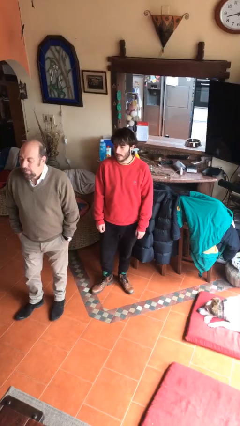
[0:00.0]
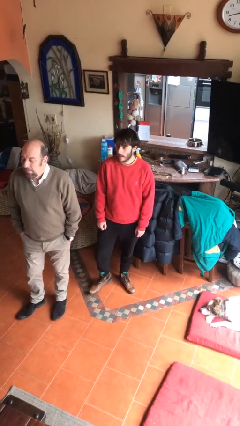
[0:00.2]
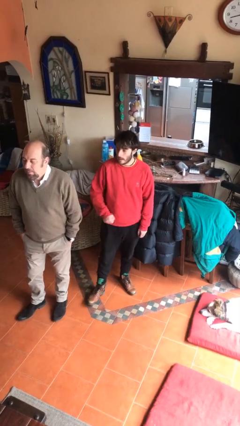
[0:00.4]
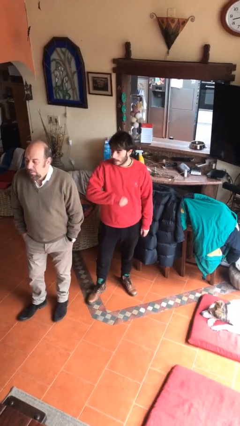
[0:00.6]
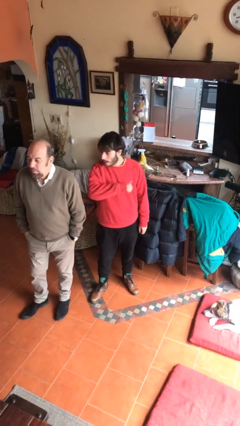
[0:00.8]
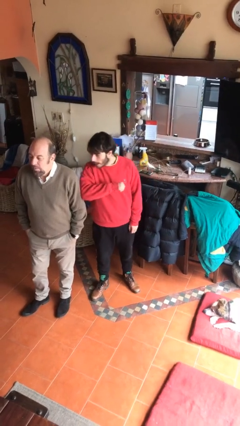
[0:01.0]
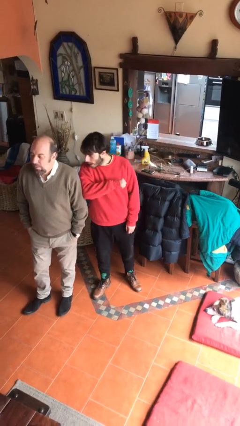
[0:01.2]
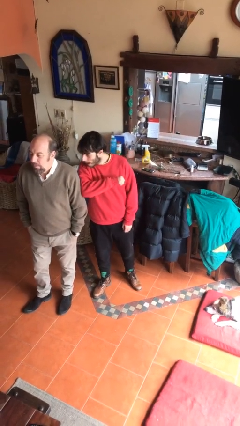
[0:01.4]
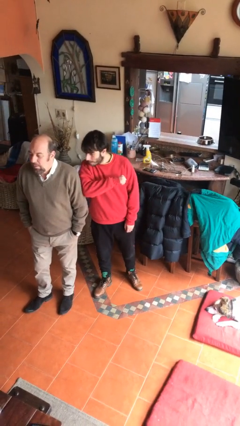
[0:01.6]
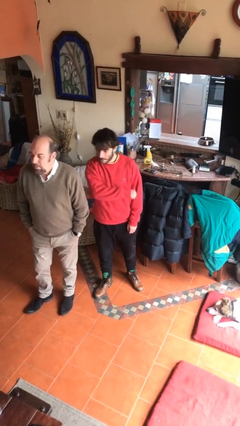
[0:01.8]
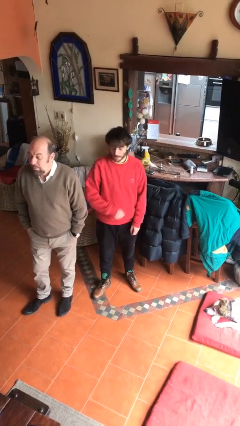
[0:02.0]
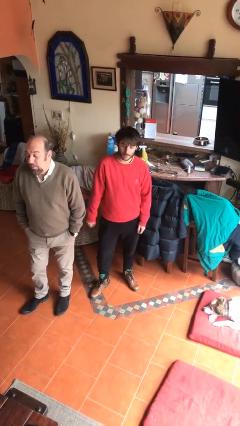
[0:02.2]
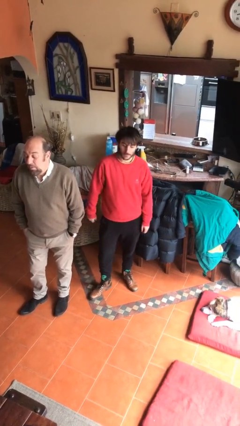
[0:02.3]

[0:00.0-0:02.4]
person nudges person with elbow

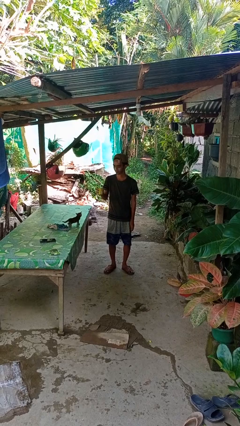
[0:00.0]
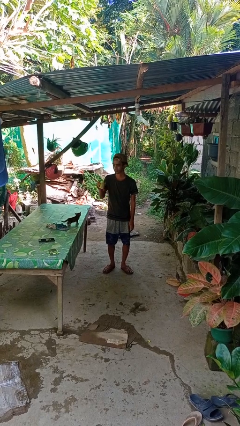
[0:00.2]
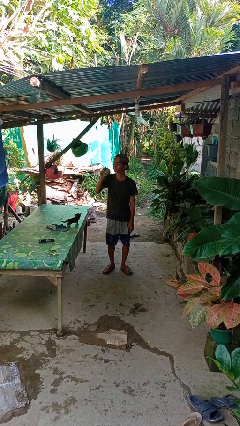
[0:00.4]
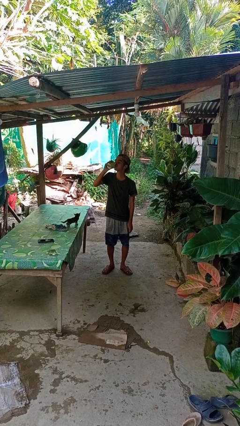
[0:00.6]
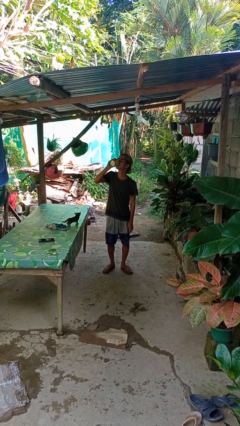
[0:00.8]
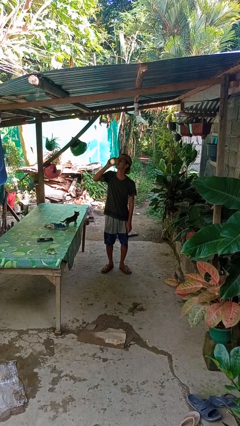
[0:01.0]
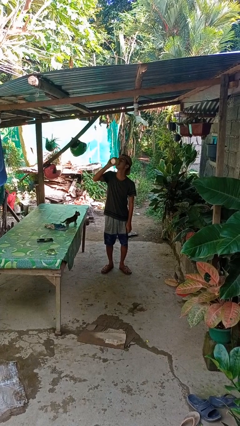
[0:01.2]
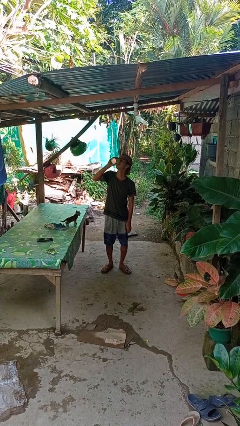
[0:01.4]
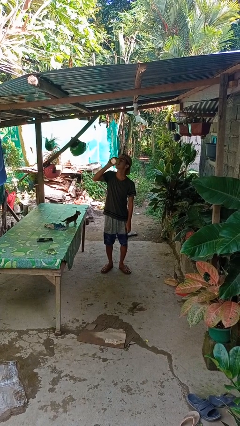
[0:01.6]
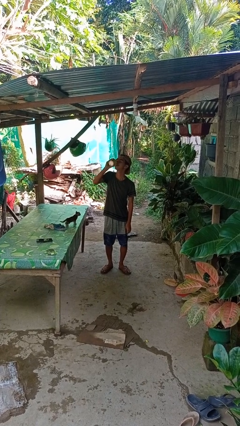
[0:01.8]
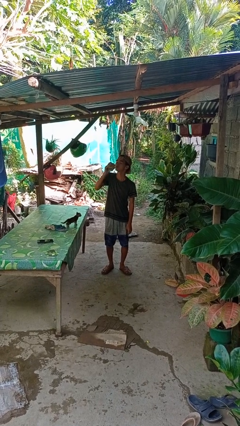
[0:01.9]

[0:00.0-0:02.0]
person drinks from beverage can

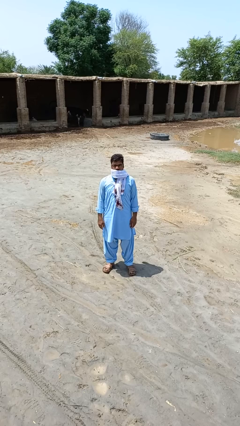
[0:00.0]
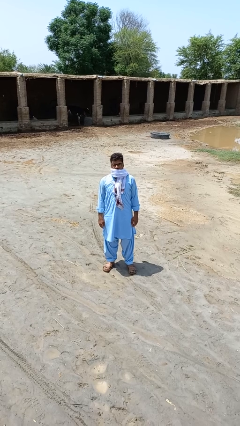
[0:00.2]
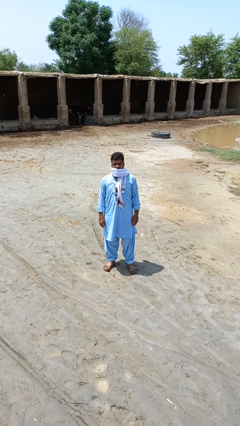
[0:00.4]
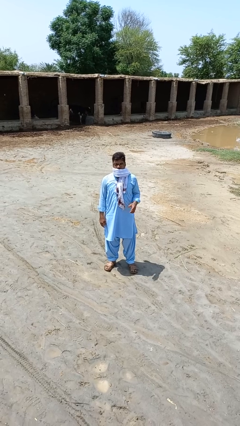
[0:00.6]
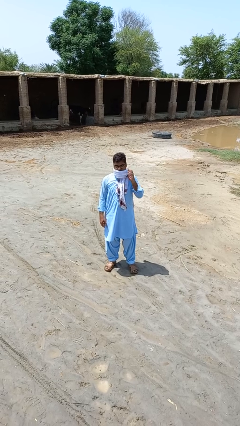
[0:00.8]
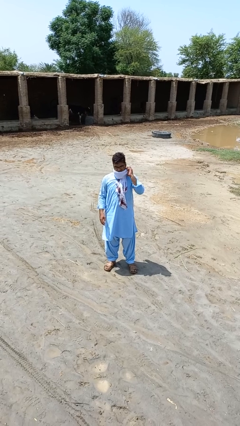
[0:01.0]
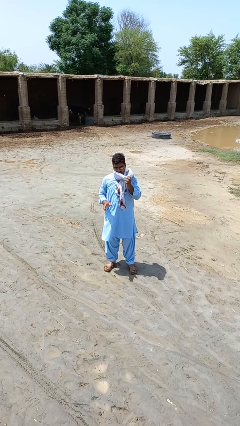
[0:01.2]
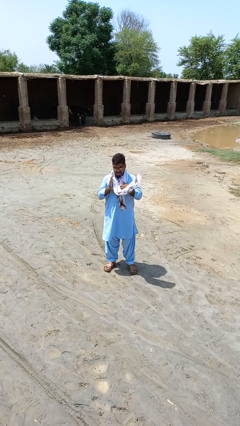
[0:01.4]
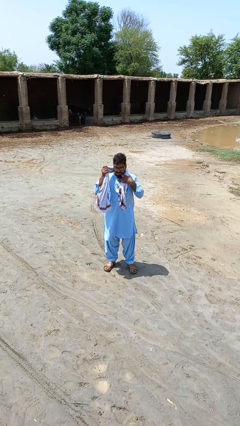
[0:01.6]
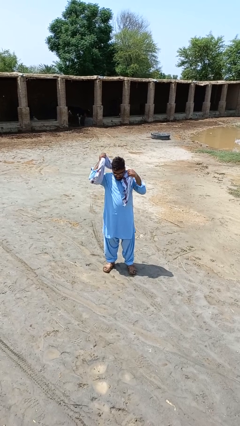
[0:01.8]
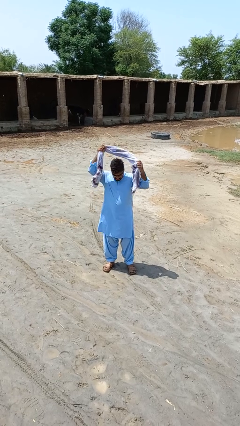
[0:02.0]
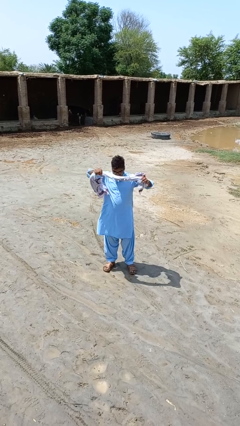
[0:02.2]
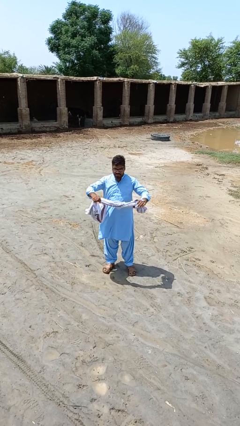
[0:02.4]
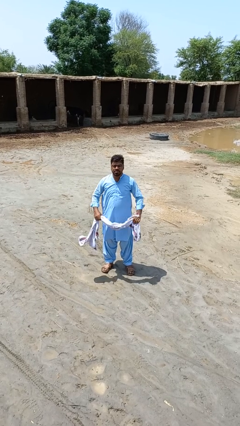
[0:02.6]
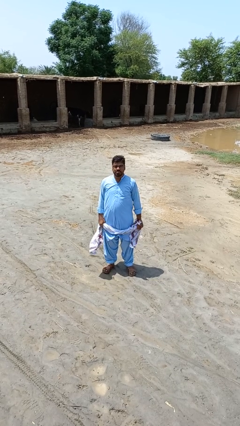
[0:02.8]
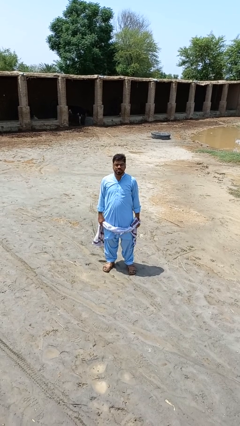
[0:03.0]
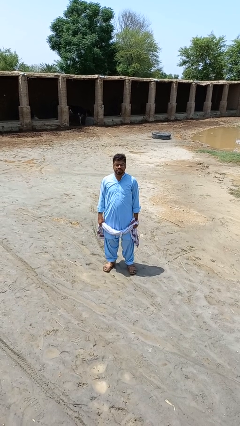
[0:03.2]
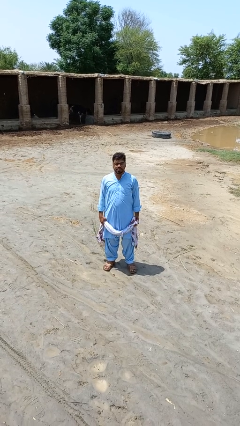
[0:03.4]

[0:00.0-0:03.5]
person takes off scarf

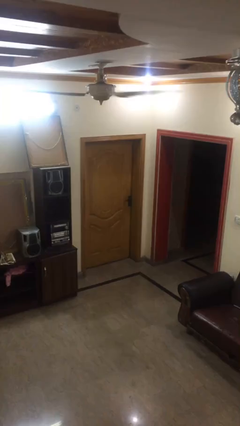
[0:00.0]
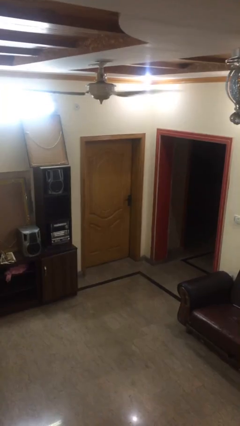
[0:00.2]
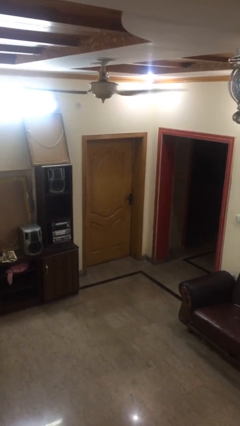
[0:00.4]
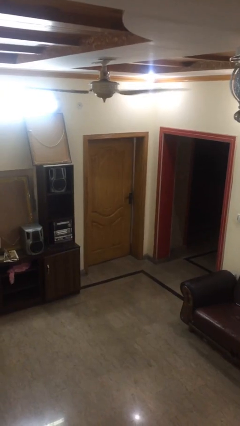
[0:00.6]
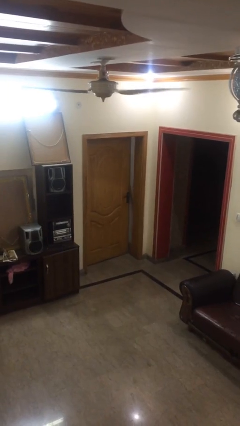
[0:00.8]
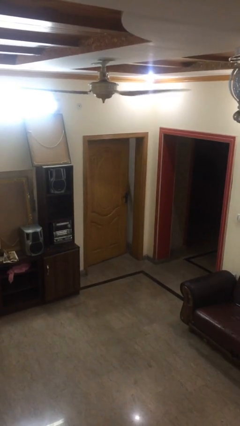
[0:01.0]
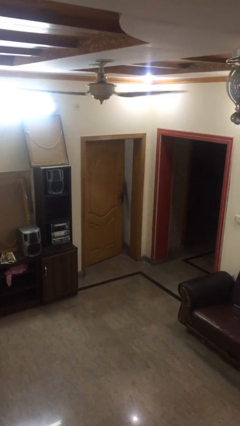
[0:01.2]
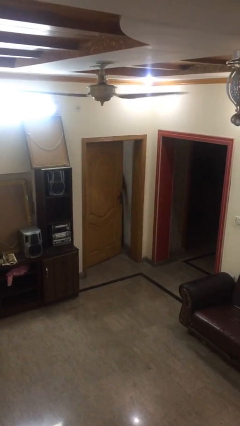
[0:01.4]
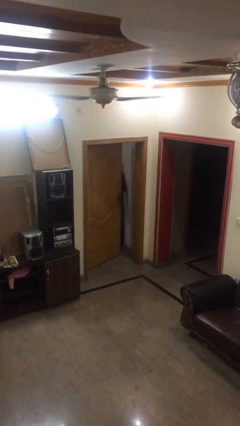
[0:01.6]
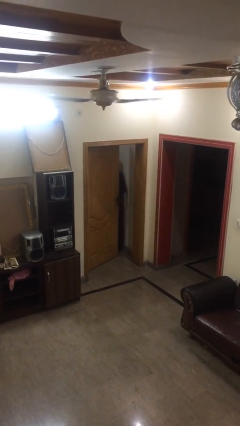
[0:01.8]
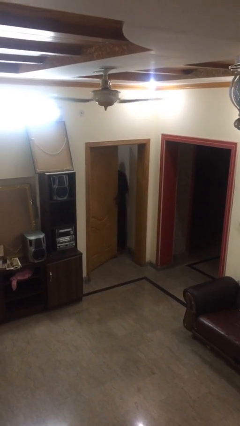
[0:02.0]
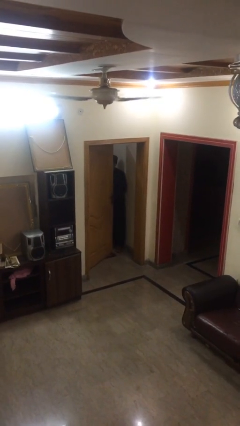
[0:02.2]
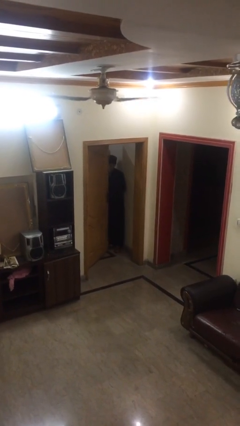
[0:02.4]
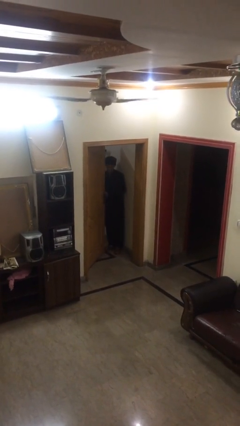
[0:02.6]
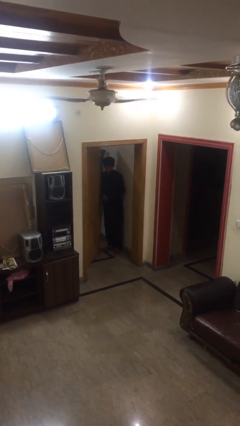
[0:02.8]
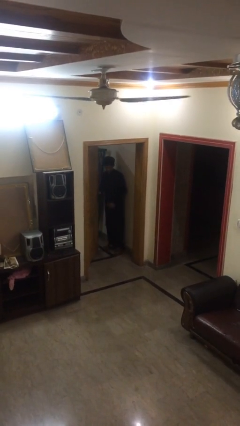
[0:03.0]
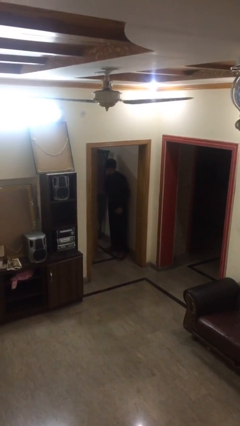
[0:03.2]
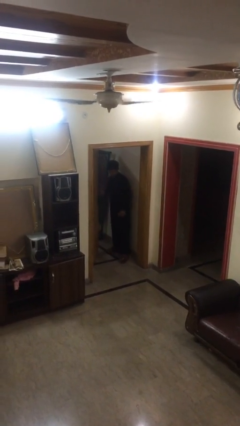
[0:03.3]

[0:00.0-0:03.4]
person opens facility door

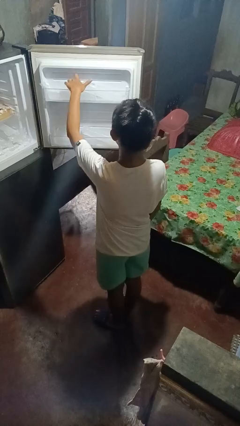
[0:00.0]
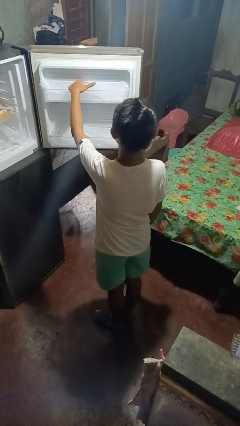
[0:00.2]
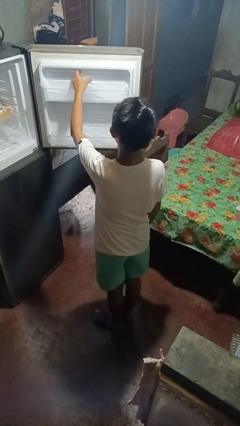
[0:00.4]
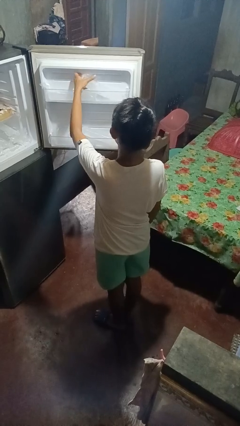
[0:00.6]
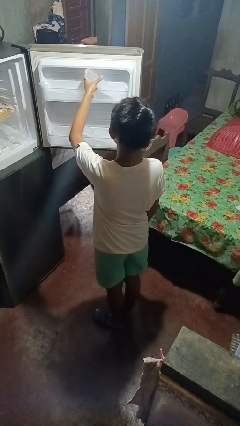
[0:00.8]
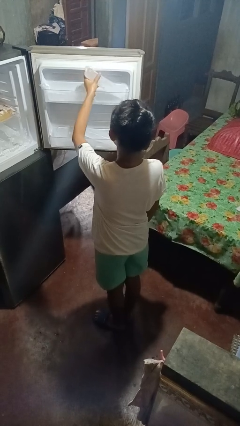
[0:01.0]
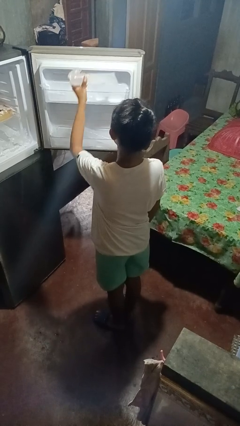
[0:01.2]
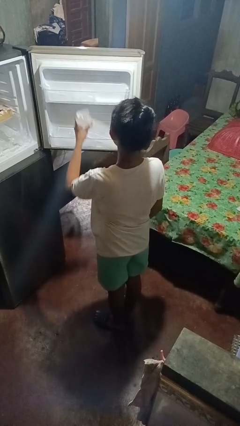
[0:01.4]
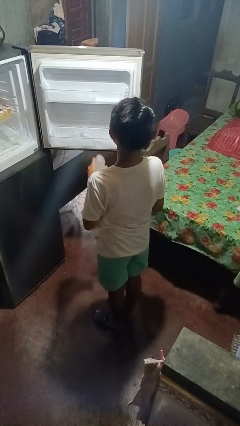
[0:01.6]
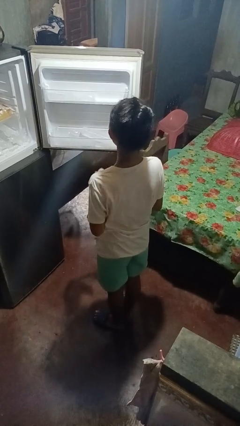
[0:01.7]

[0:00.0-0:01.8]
person takes object from refrigerator

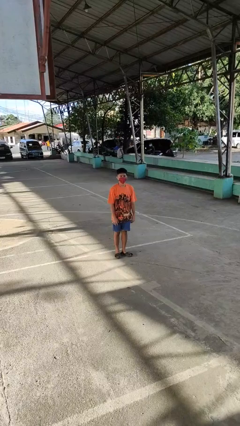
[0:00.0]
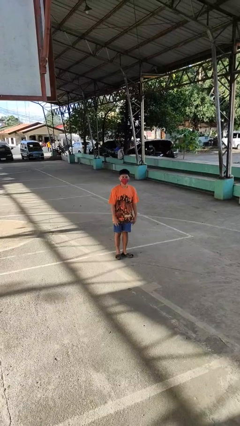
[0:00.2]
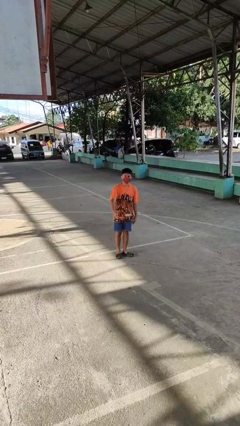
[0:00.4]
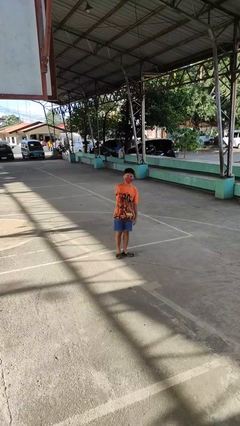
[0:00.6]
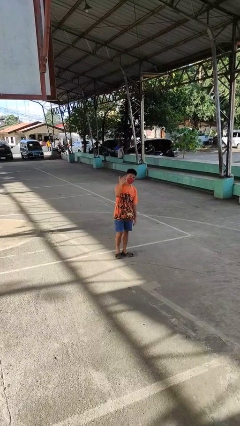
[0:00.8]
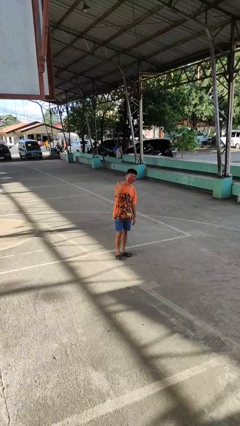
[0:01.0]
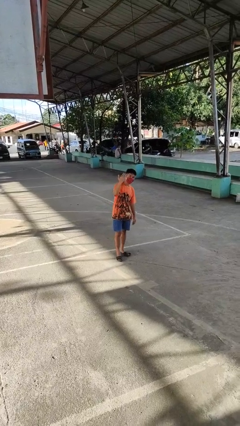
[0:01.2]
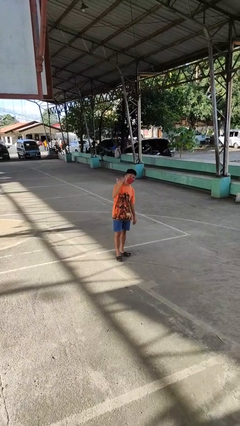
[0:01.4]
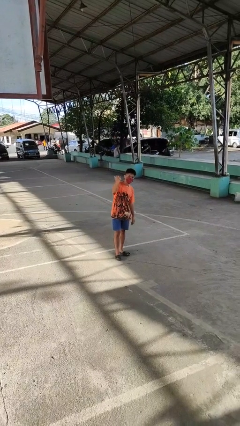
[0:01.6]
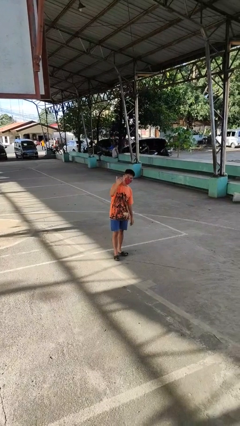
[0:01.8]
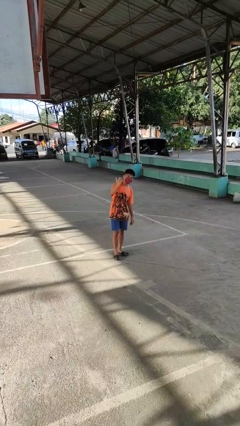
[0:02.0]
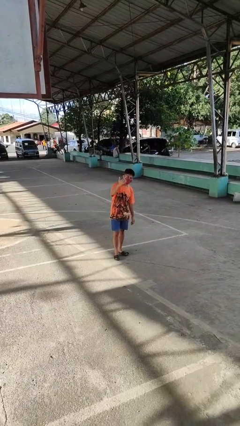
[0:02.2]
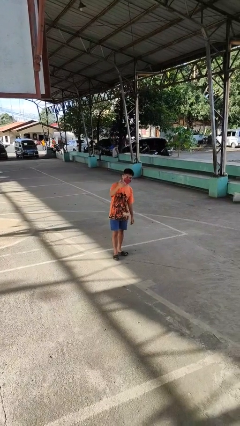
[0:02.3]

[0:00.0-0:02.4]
person gestures come here

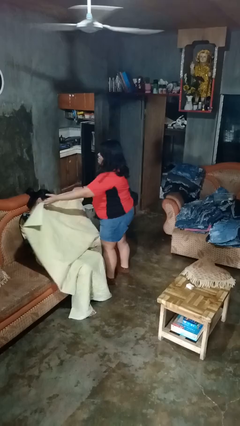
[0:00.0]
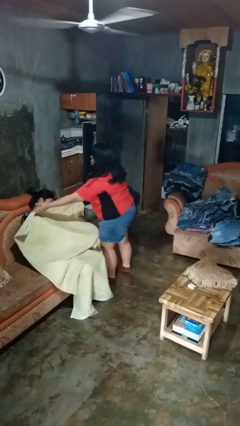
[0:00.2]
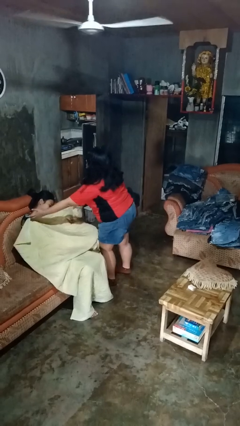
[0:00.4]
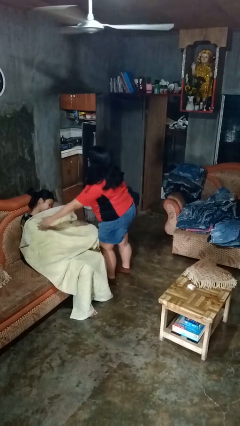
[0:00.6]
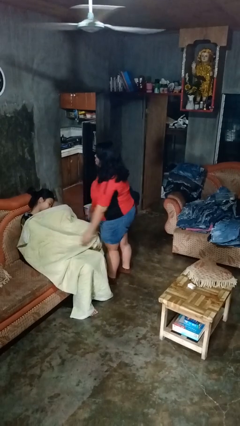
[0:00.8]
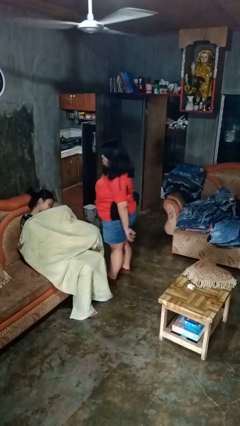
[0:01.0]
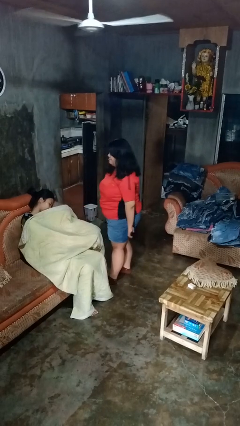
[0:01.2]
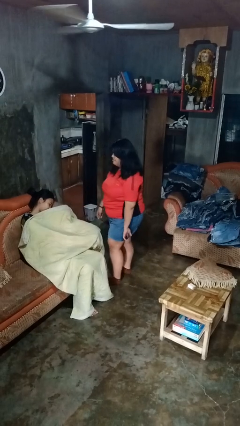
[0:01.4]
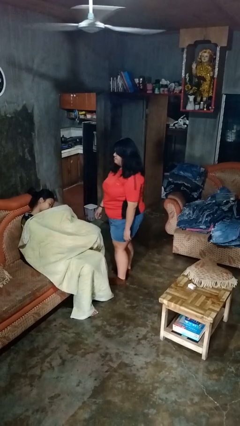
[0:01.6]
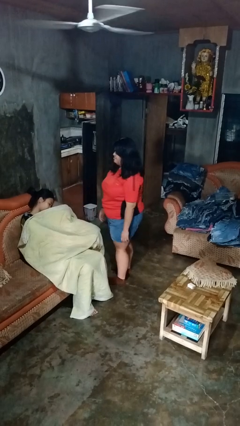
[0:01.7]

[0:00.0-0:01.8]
person covers friend with blanket
